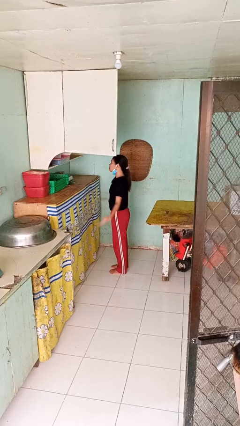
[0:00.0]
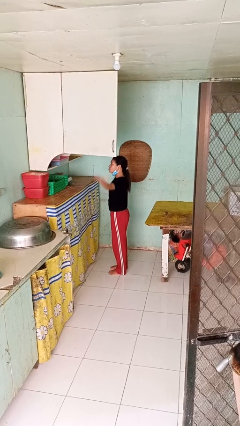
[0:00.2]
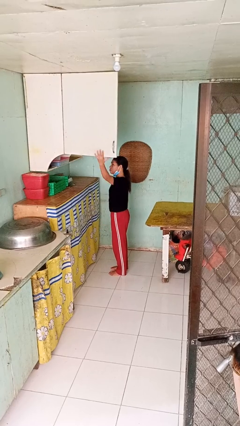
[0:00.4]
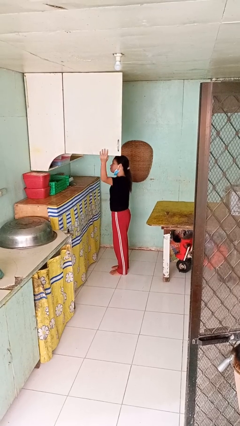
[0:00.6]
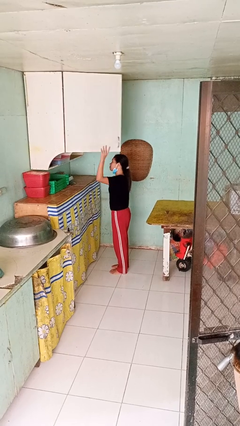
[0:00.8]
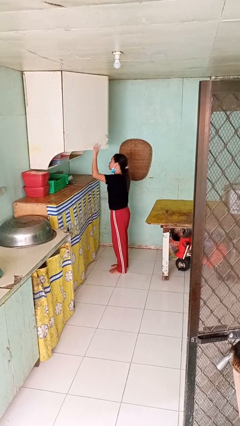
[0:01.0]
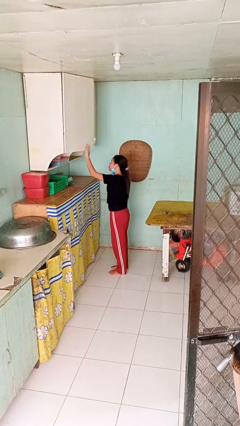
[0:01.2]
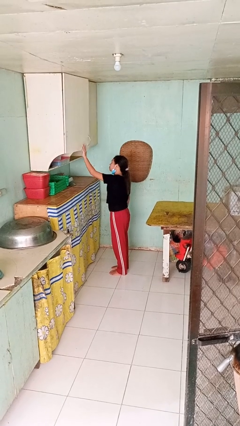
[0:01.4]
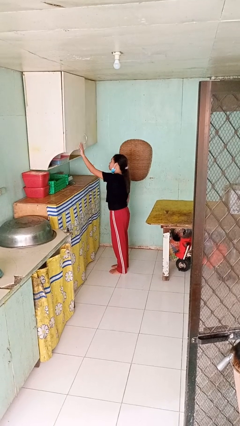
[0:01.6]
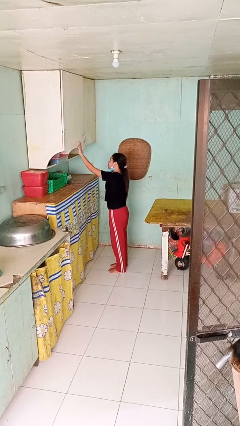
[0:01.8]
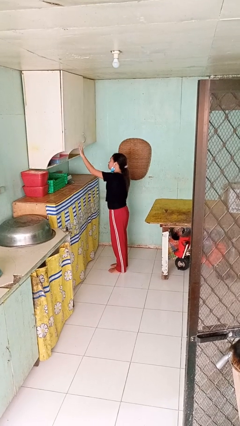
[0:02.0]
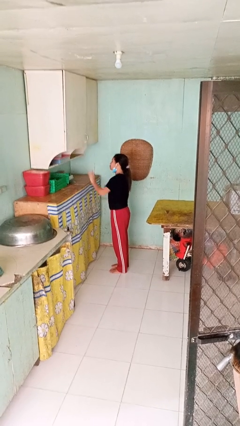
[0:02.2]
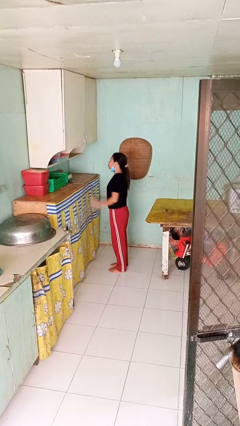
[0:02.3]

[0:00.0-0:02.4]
person closes cabinet

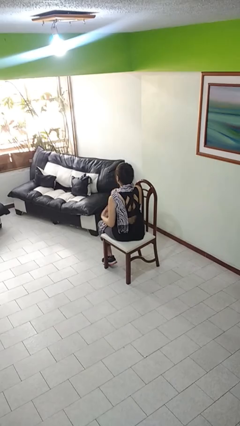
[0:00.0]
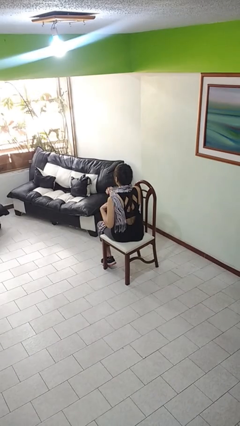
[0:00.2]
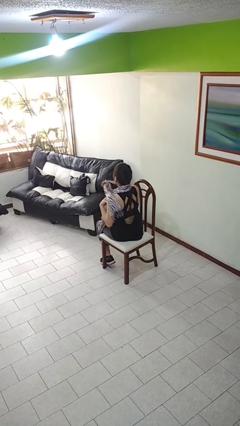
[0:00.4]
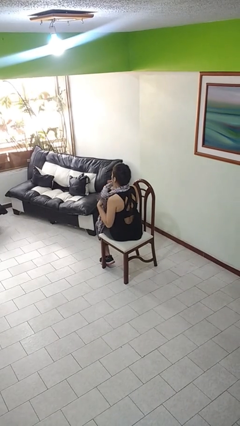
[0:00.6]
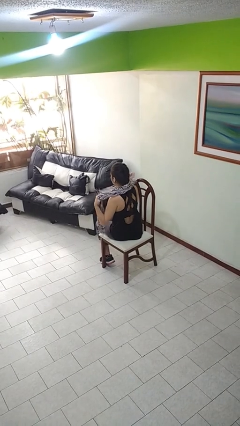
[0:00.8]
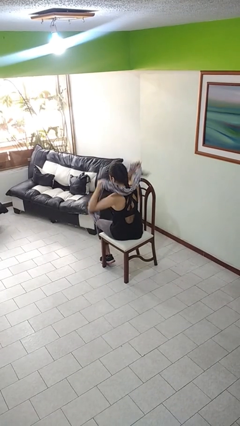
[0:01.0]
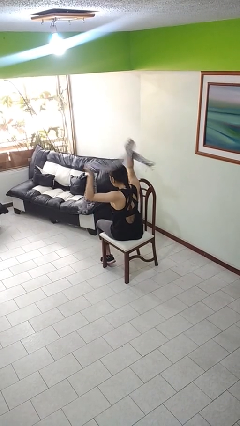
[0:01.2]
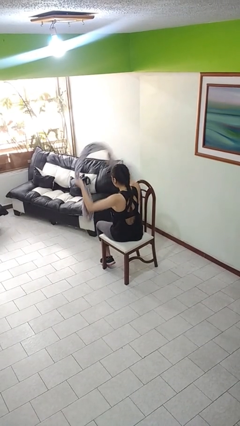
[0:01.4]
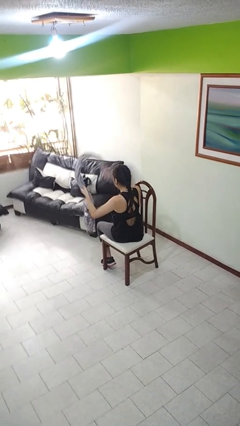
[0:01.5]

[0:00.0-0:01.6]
person takes off scarf

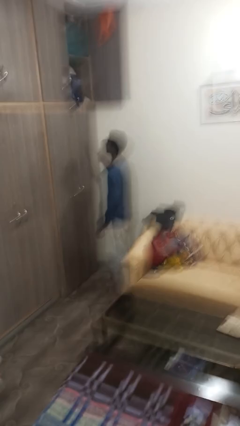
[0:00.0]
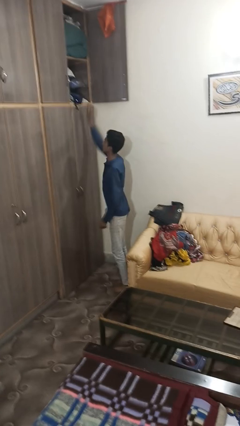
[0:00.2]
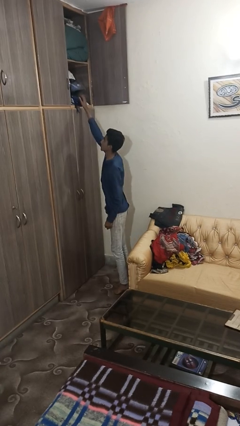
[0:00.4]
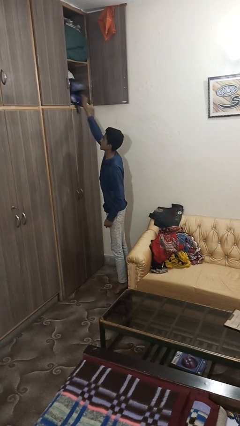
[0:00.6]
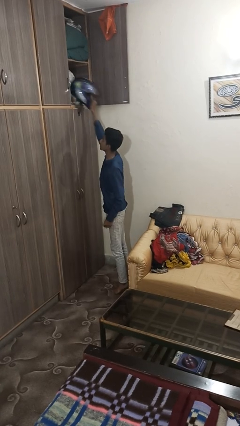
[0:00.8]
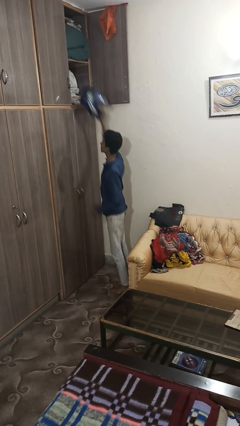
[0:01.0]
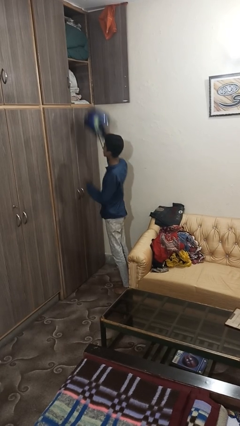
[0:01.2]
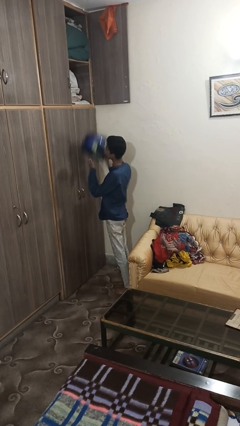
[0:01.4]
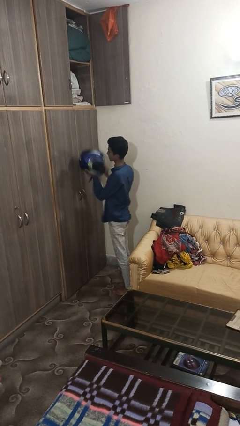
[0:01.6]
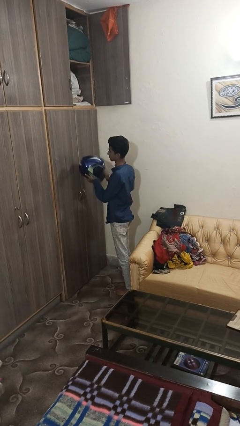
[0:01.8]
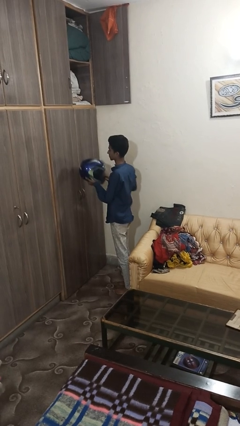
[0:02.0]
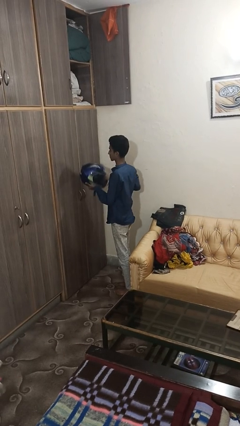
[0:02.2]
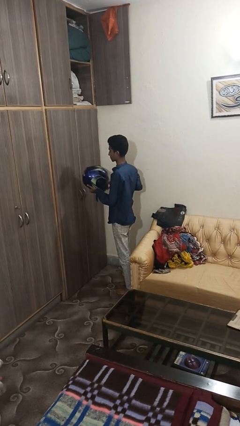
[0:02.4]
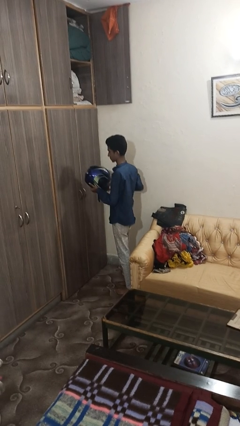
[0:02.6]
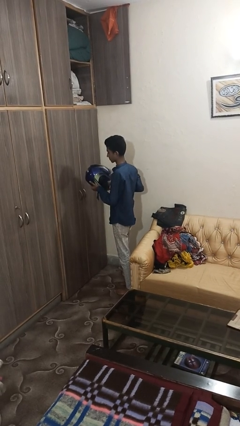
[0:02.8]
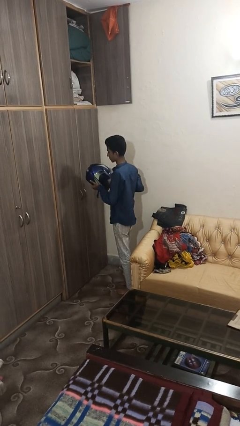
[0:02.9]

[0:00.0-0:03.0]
person picks up object from shelf

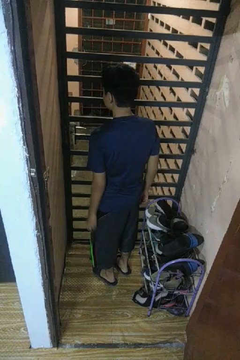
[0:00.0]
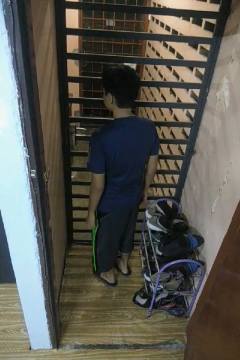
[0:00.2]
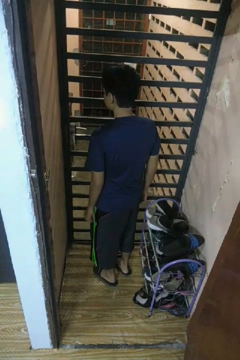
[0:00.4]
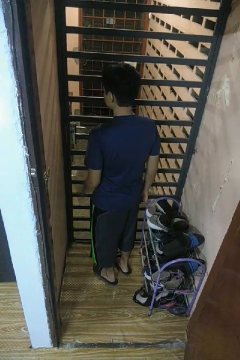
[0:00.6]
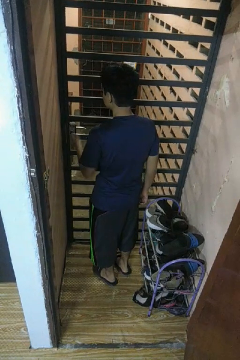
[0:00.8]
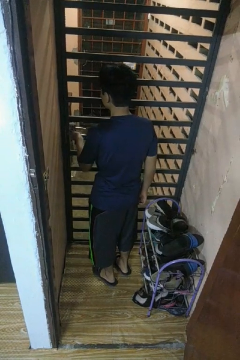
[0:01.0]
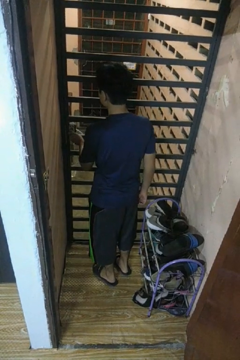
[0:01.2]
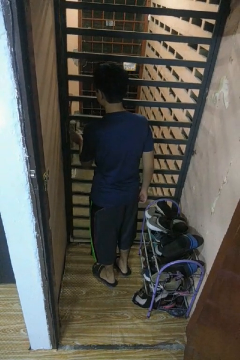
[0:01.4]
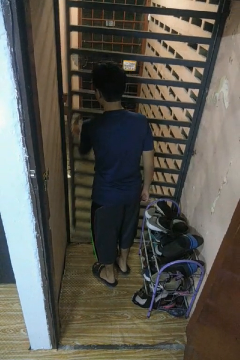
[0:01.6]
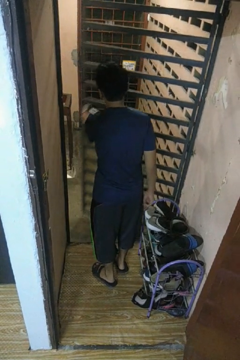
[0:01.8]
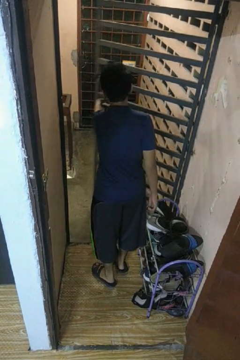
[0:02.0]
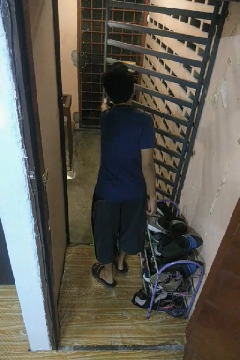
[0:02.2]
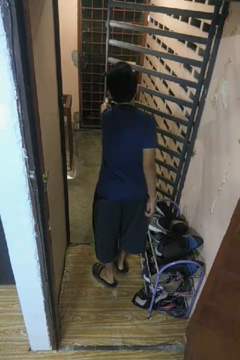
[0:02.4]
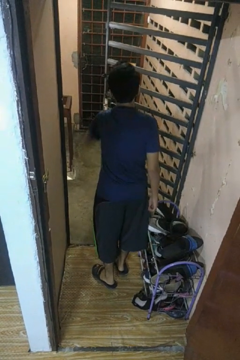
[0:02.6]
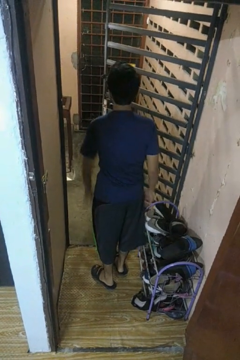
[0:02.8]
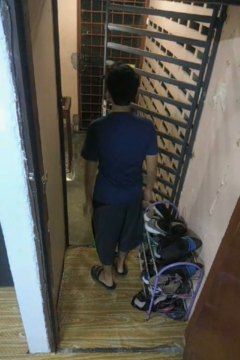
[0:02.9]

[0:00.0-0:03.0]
person opens gate

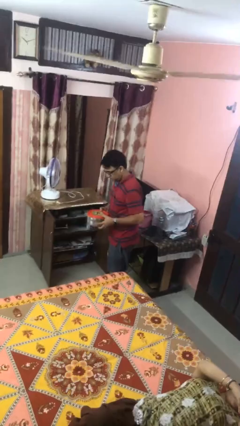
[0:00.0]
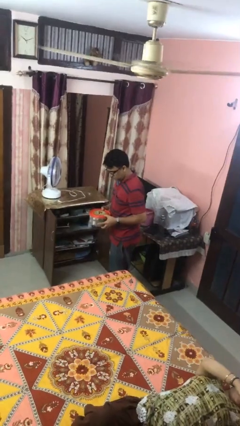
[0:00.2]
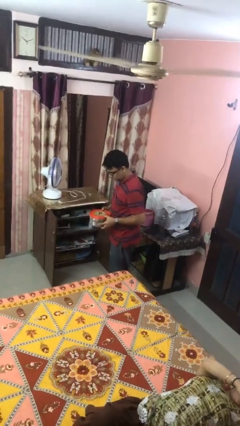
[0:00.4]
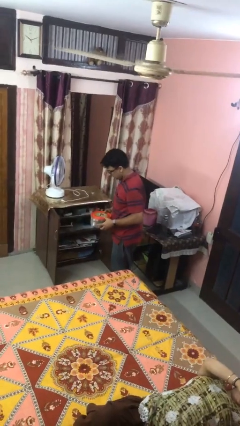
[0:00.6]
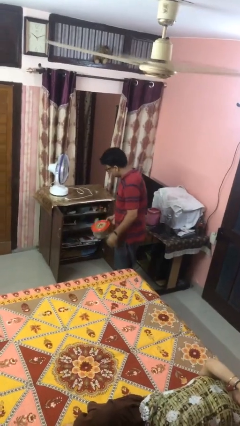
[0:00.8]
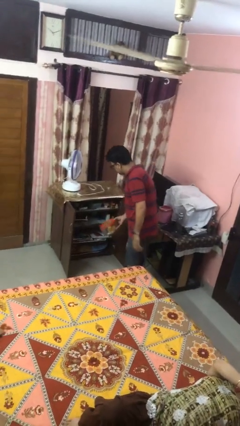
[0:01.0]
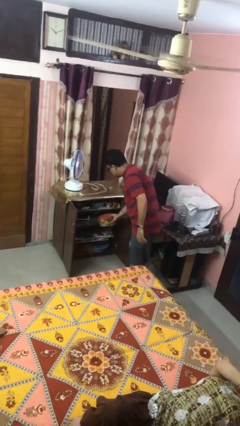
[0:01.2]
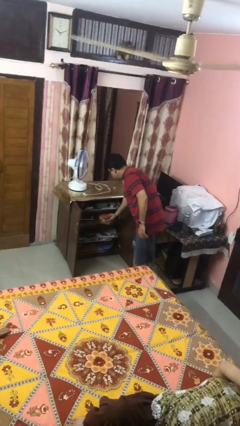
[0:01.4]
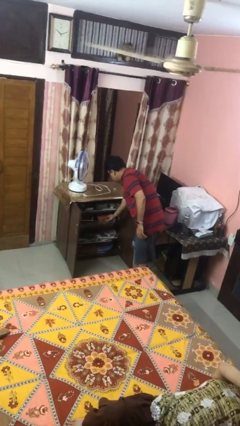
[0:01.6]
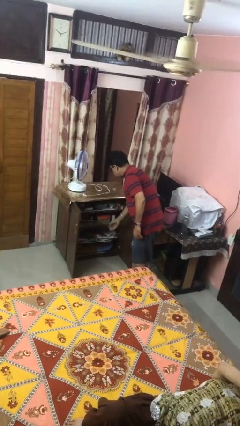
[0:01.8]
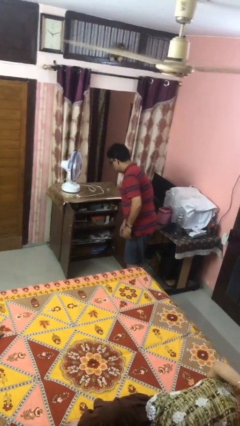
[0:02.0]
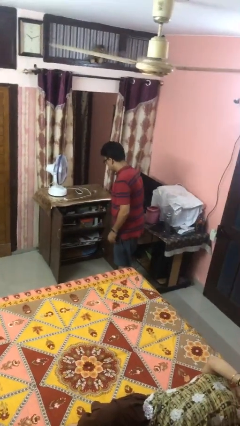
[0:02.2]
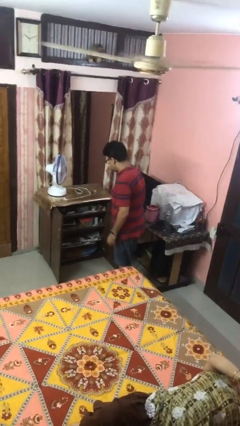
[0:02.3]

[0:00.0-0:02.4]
person puts down object into cabinet

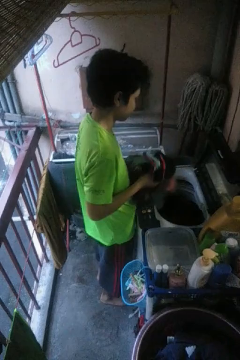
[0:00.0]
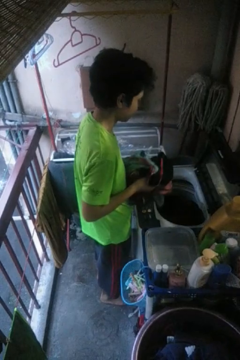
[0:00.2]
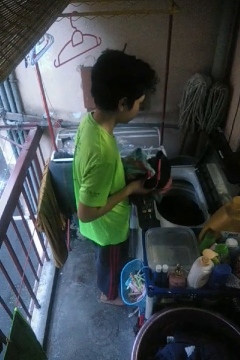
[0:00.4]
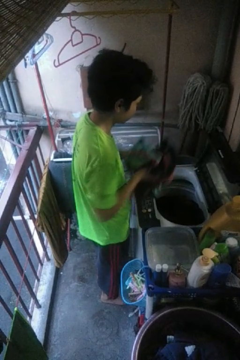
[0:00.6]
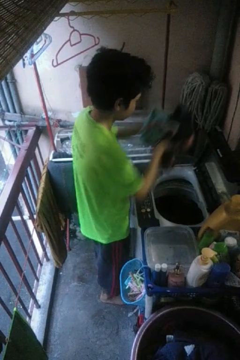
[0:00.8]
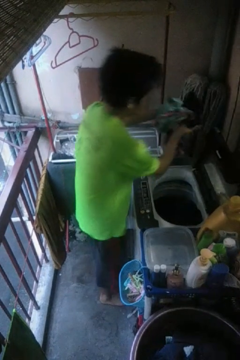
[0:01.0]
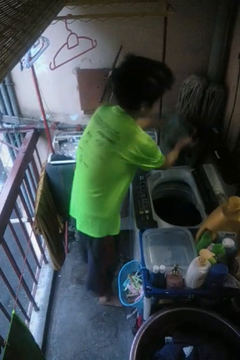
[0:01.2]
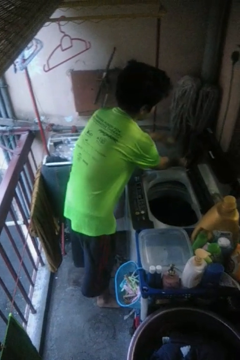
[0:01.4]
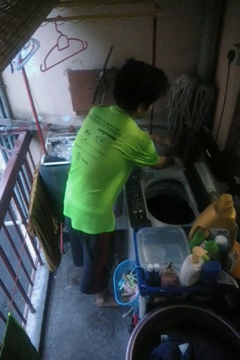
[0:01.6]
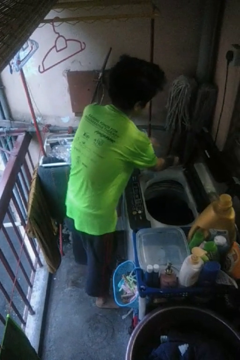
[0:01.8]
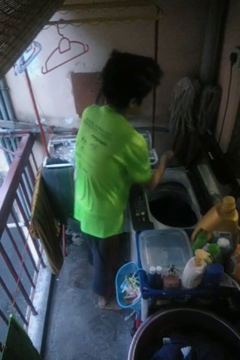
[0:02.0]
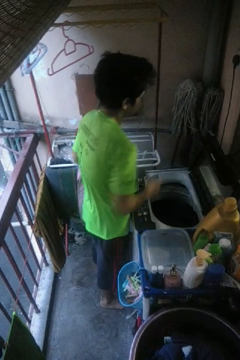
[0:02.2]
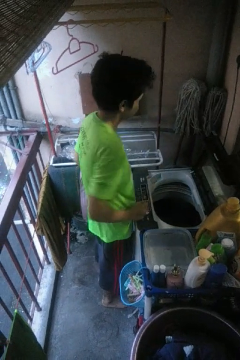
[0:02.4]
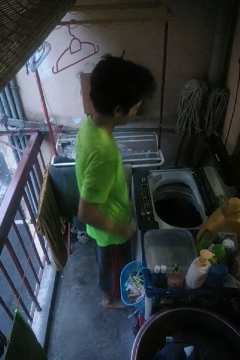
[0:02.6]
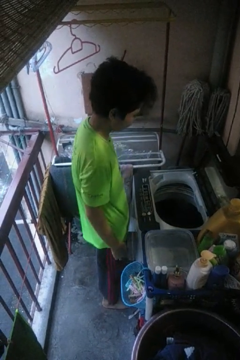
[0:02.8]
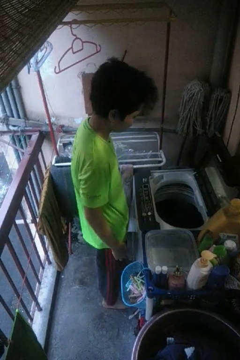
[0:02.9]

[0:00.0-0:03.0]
person loads dryer

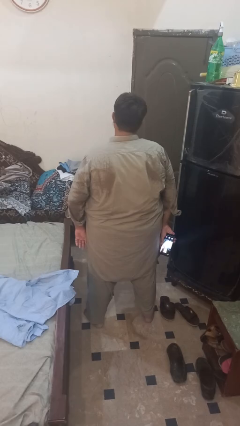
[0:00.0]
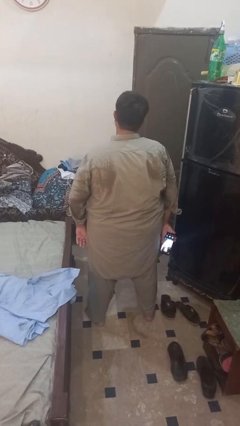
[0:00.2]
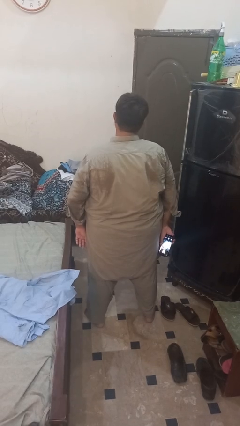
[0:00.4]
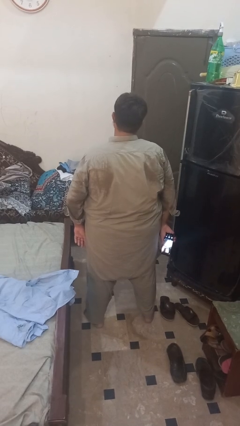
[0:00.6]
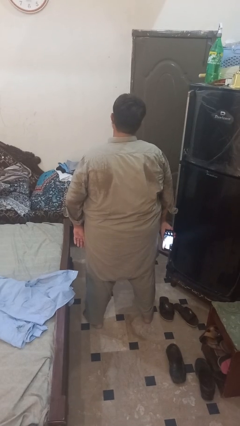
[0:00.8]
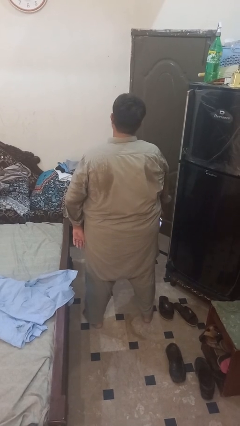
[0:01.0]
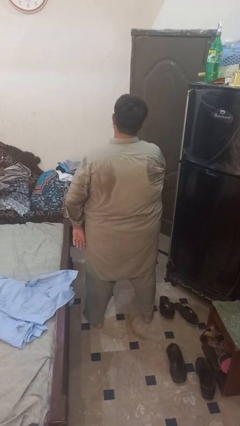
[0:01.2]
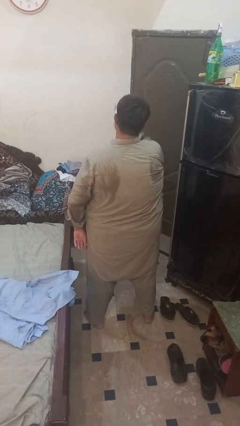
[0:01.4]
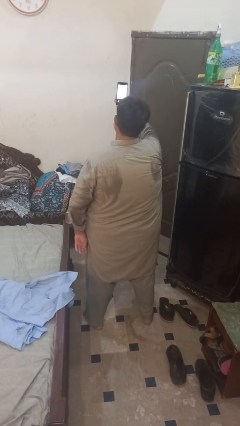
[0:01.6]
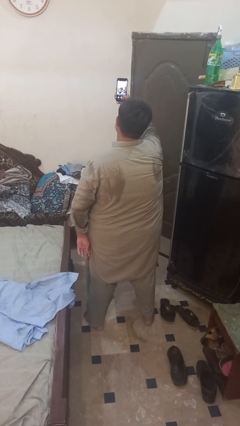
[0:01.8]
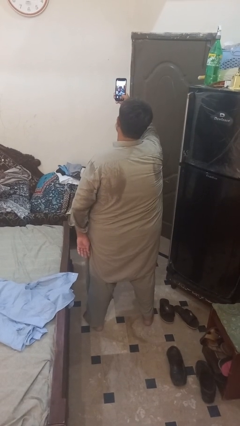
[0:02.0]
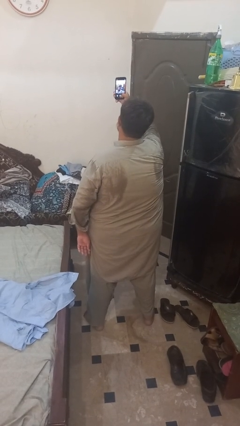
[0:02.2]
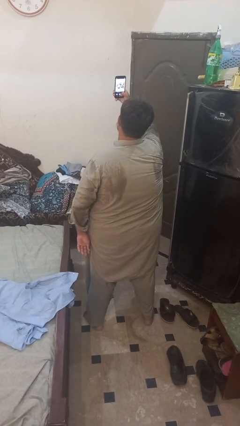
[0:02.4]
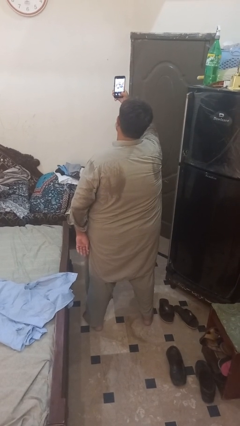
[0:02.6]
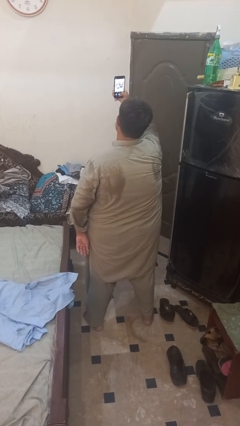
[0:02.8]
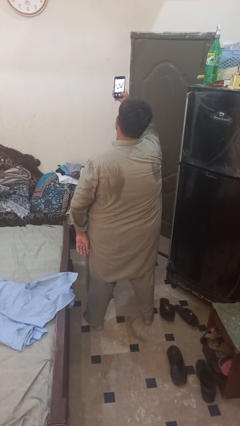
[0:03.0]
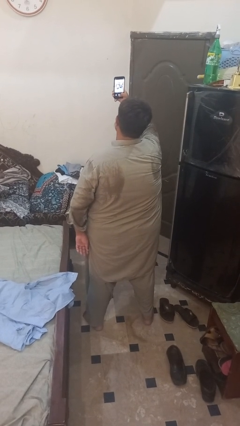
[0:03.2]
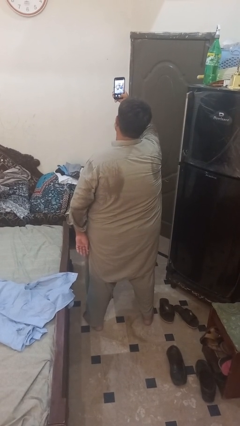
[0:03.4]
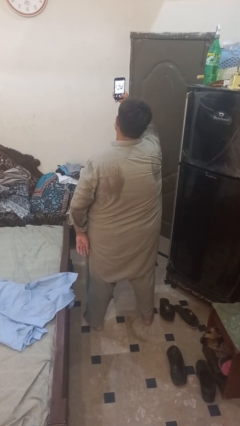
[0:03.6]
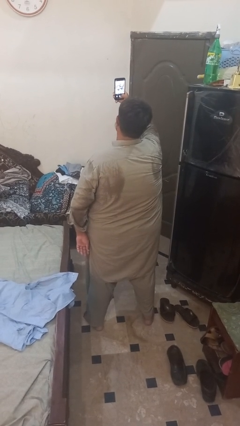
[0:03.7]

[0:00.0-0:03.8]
person takes selfie
